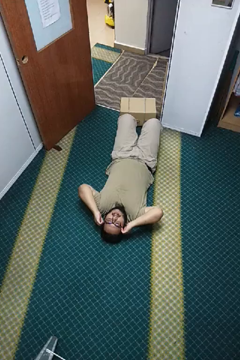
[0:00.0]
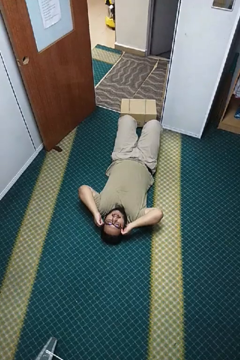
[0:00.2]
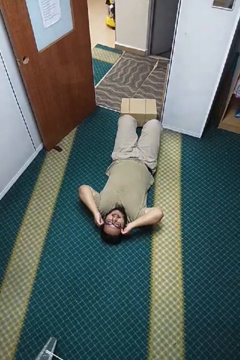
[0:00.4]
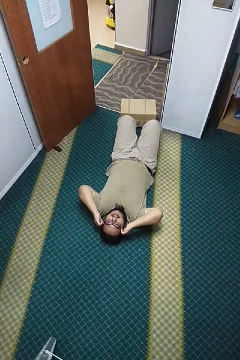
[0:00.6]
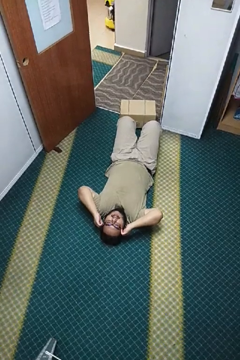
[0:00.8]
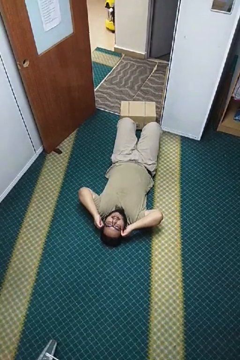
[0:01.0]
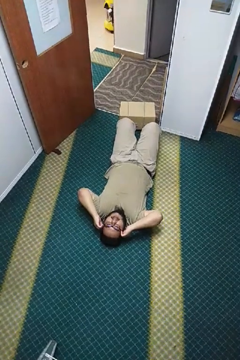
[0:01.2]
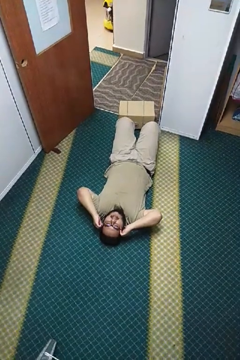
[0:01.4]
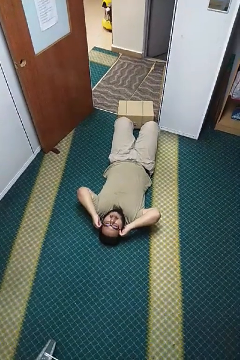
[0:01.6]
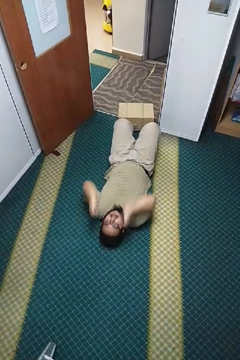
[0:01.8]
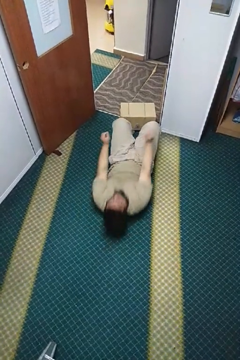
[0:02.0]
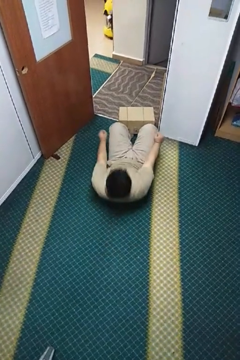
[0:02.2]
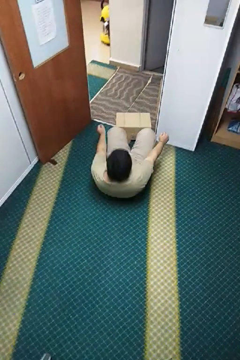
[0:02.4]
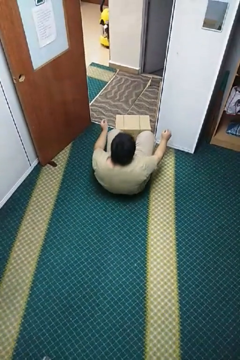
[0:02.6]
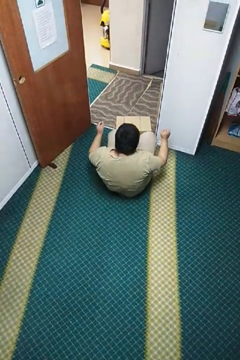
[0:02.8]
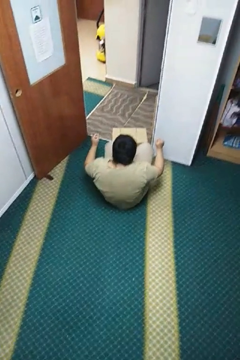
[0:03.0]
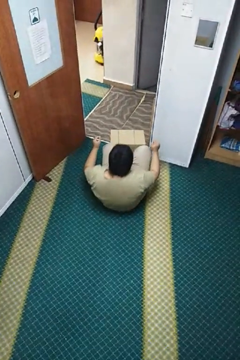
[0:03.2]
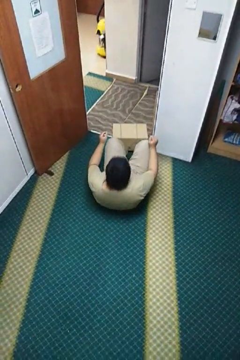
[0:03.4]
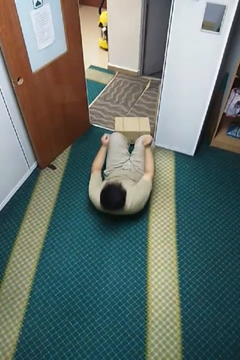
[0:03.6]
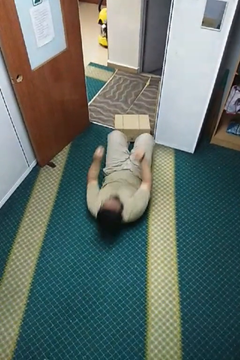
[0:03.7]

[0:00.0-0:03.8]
person exercises with situp

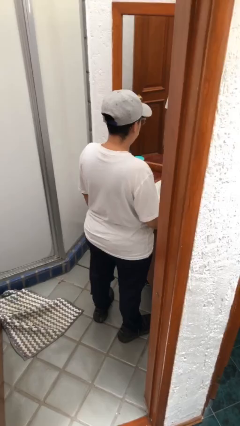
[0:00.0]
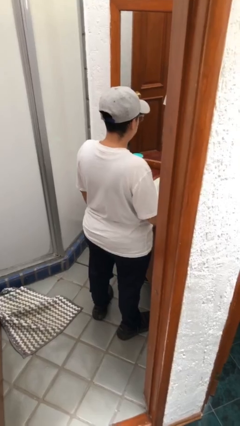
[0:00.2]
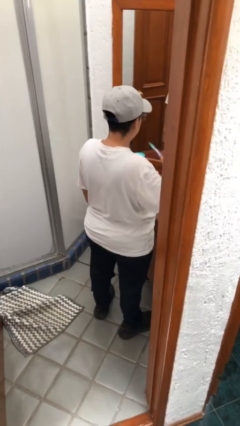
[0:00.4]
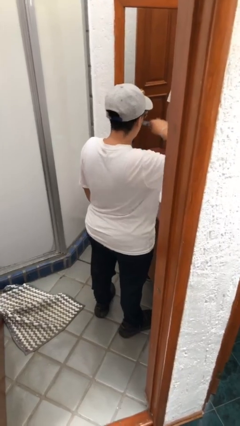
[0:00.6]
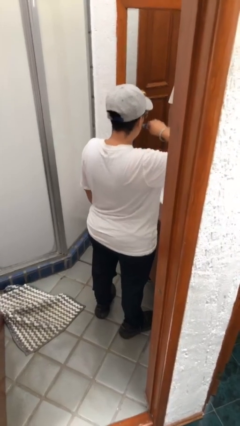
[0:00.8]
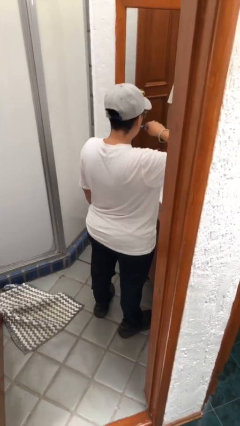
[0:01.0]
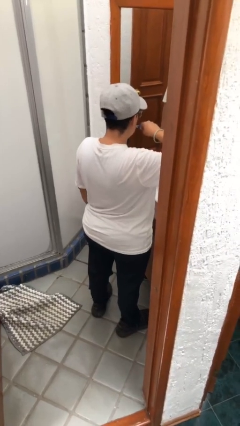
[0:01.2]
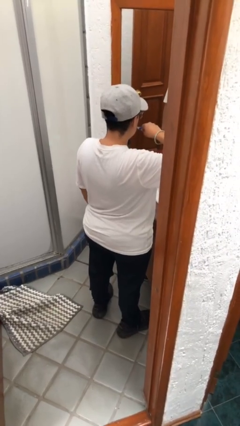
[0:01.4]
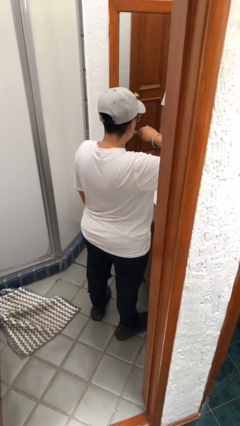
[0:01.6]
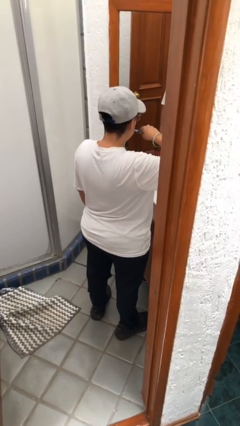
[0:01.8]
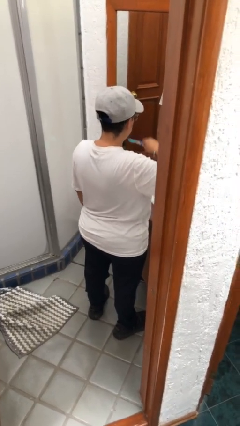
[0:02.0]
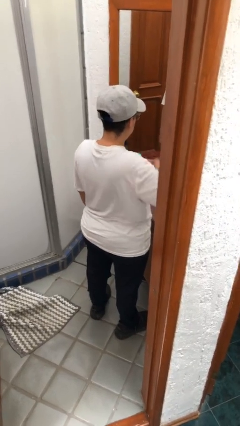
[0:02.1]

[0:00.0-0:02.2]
person brushes teeth

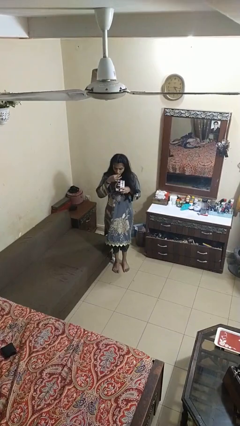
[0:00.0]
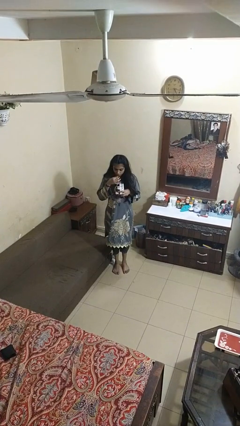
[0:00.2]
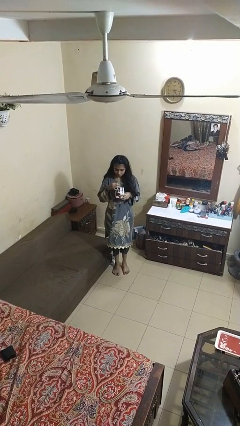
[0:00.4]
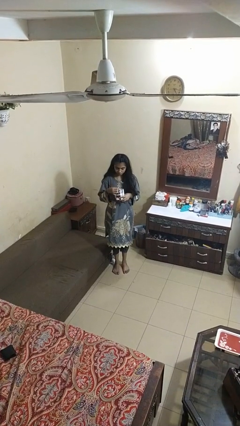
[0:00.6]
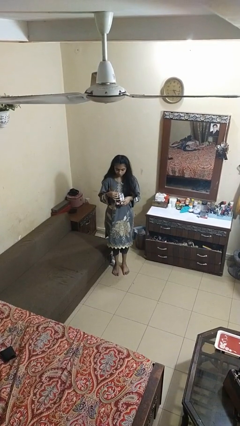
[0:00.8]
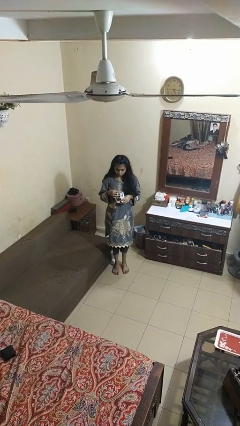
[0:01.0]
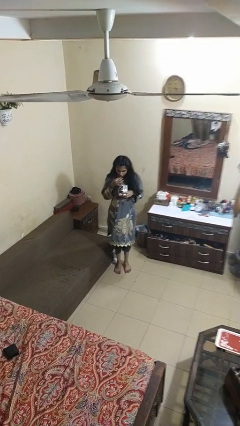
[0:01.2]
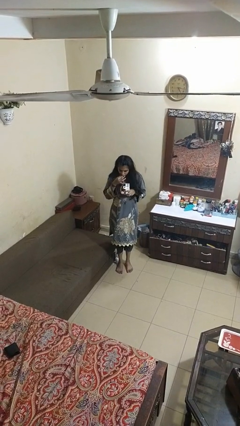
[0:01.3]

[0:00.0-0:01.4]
person eats snack from bag

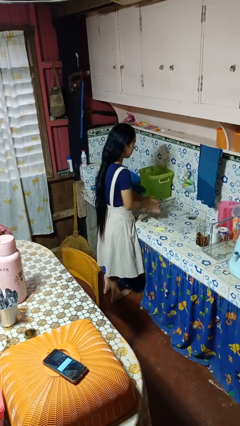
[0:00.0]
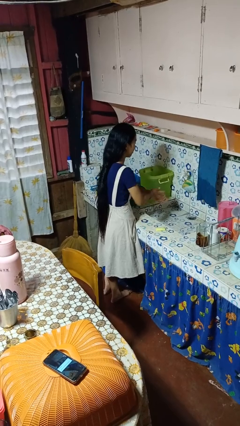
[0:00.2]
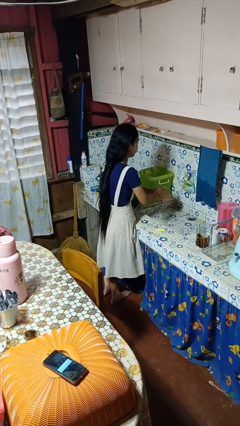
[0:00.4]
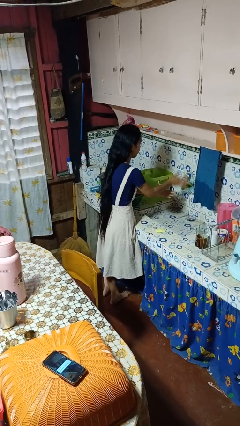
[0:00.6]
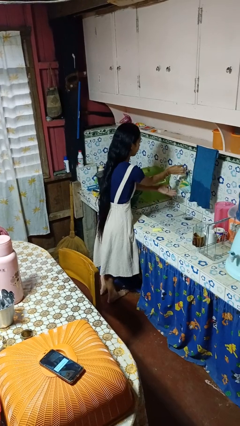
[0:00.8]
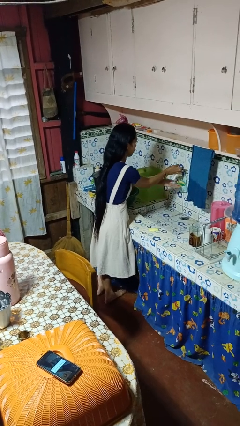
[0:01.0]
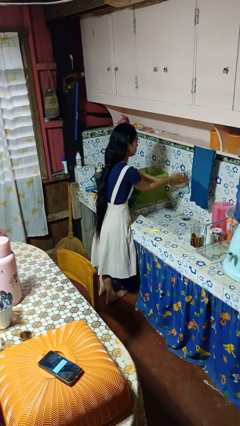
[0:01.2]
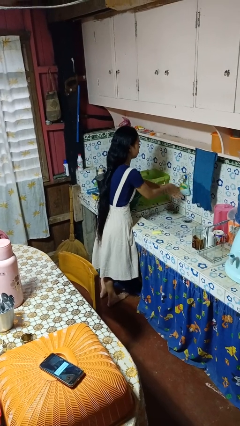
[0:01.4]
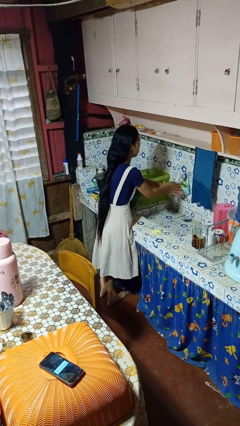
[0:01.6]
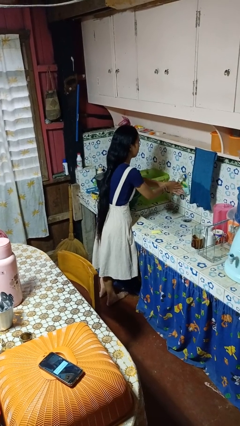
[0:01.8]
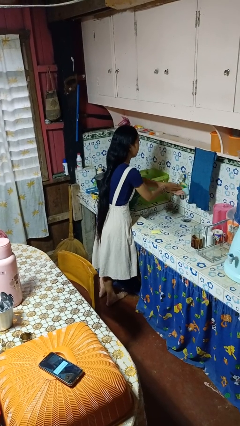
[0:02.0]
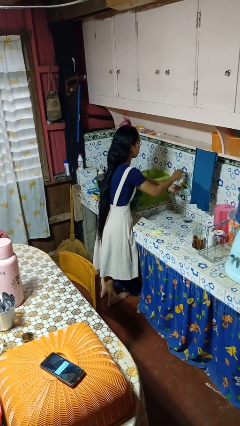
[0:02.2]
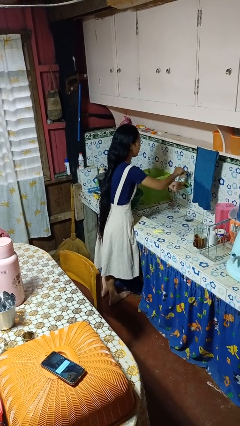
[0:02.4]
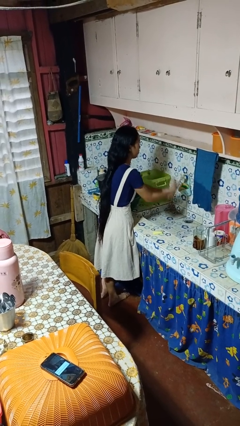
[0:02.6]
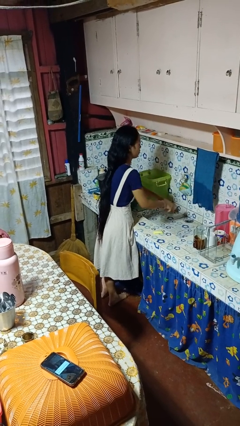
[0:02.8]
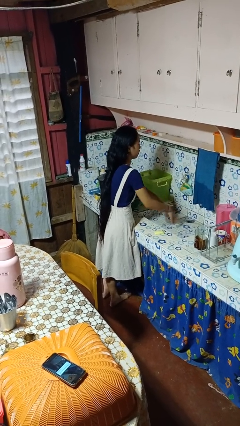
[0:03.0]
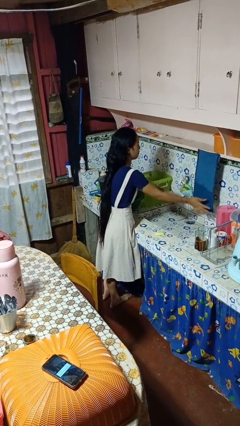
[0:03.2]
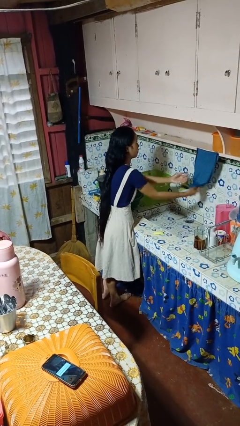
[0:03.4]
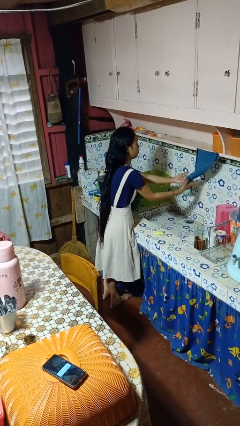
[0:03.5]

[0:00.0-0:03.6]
person washes hands

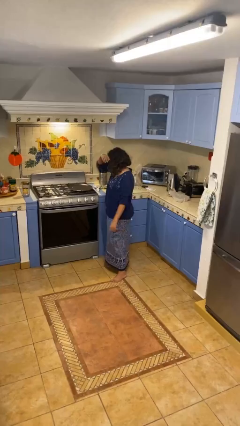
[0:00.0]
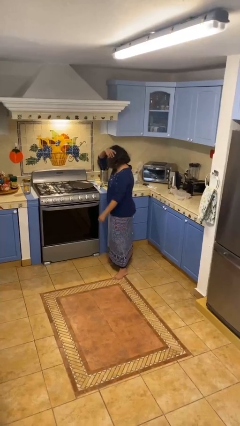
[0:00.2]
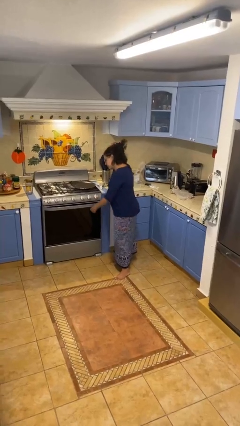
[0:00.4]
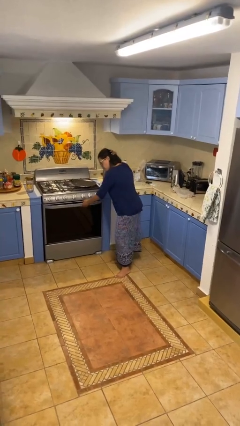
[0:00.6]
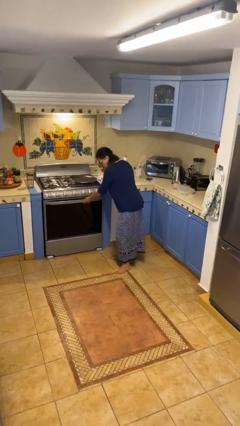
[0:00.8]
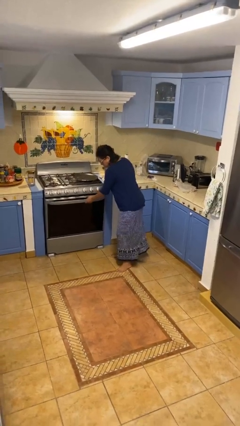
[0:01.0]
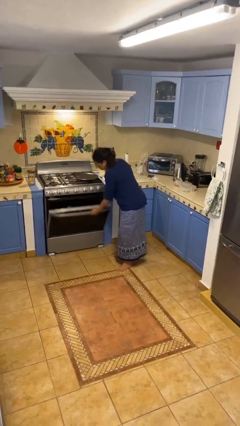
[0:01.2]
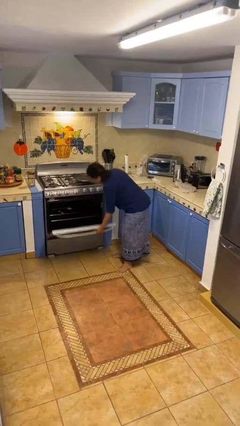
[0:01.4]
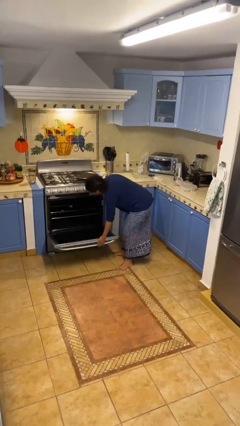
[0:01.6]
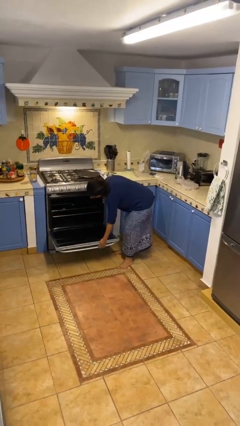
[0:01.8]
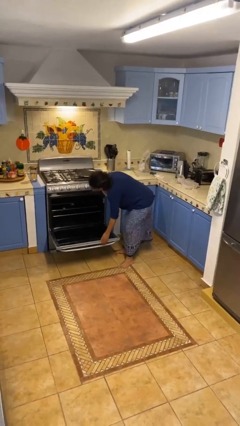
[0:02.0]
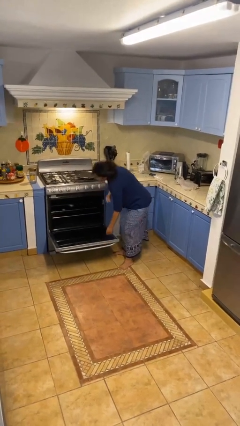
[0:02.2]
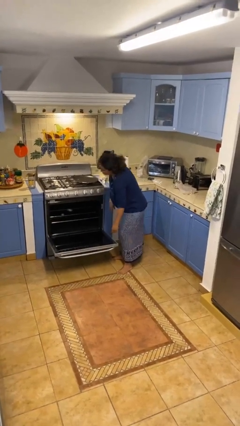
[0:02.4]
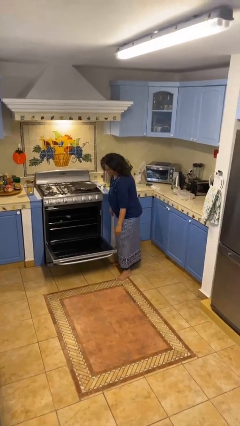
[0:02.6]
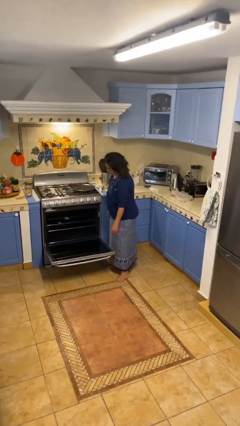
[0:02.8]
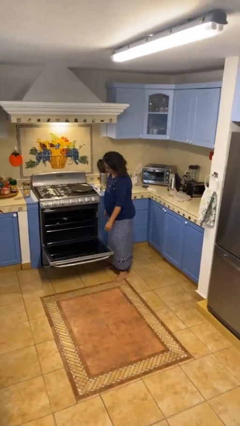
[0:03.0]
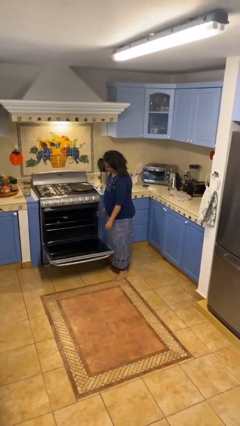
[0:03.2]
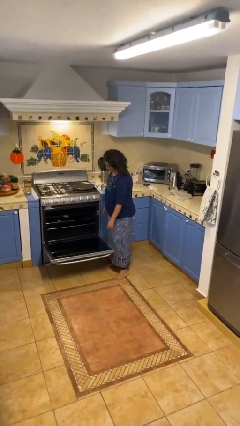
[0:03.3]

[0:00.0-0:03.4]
person opens oven door

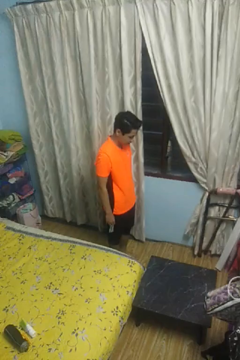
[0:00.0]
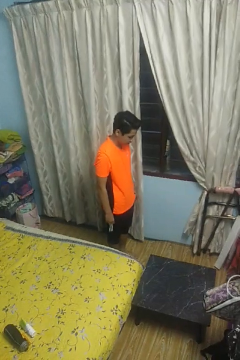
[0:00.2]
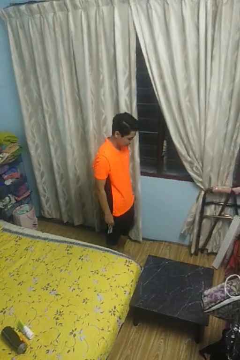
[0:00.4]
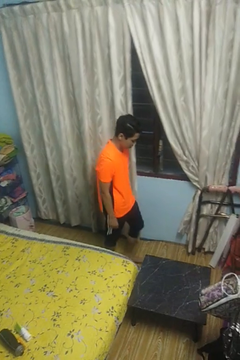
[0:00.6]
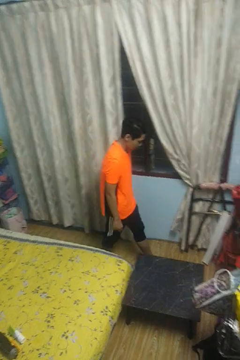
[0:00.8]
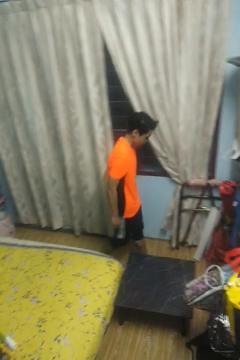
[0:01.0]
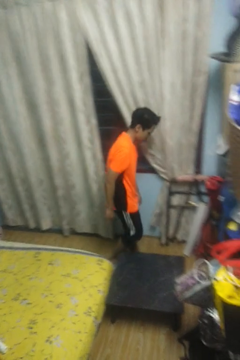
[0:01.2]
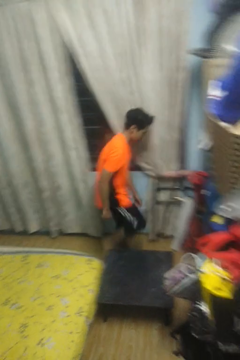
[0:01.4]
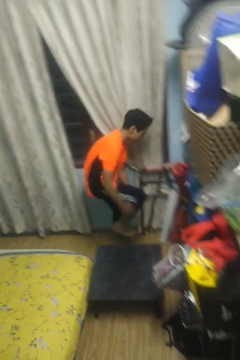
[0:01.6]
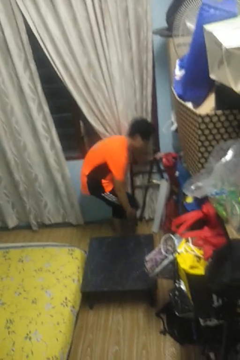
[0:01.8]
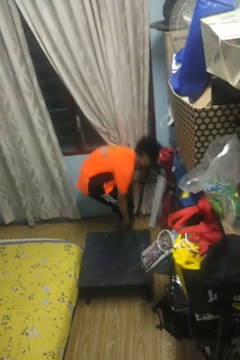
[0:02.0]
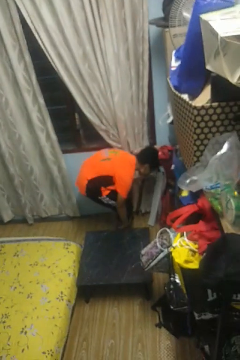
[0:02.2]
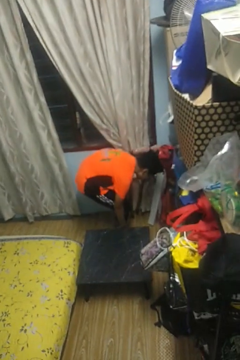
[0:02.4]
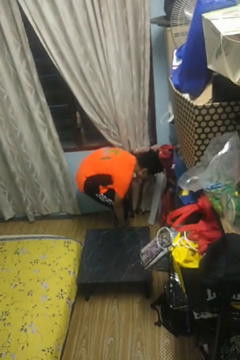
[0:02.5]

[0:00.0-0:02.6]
person bumps into table

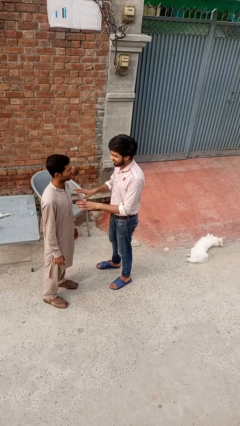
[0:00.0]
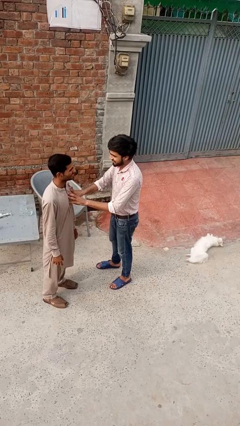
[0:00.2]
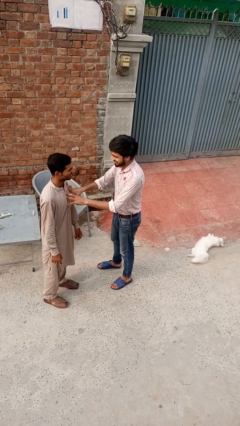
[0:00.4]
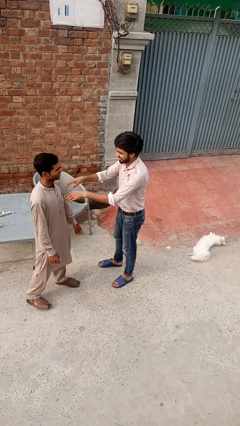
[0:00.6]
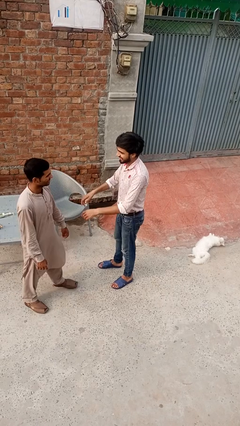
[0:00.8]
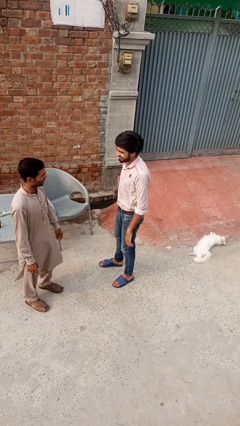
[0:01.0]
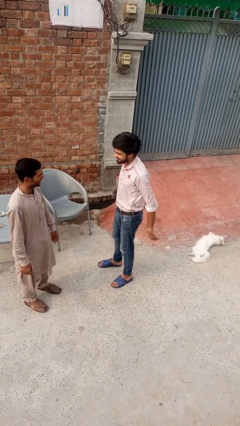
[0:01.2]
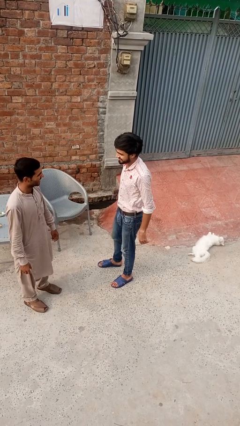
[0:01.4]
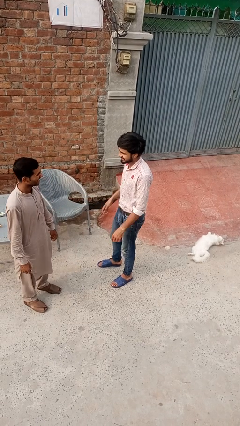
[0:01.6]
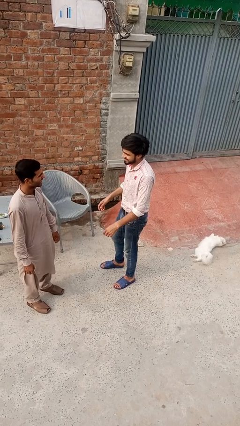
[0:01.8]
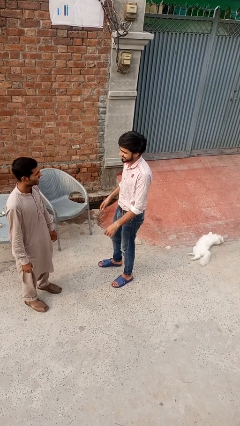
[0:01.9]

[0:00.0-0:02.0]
person grabs person by forearm
